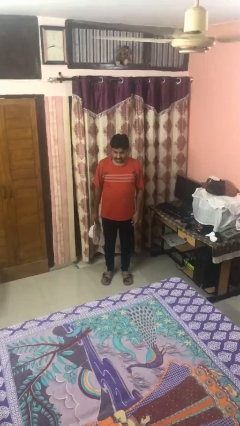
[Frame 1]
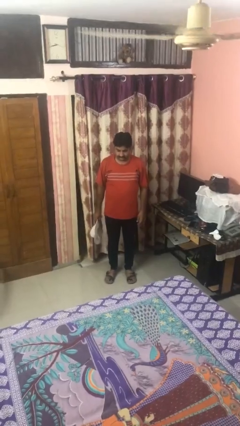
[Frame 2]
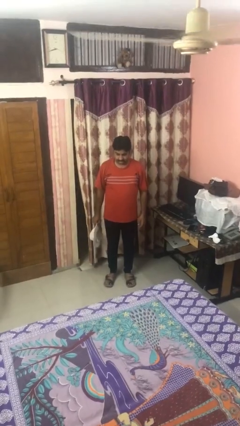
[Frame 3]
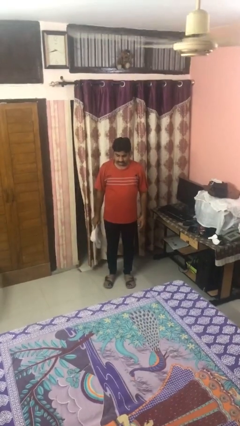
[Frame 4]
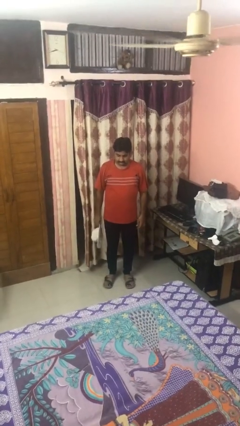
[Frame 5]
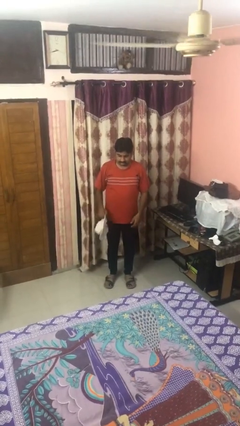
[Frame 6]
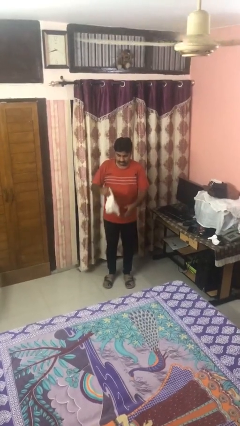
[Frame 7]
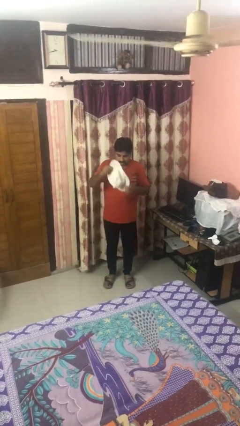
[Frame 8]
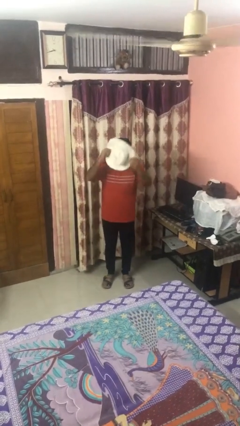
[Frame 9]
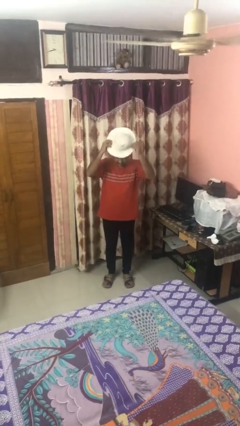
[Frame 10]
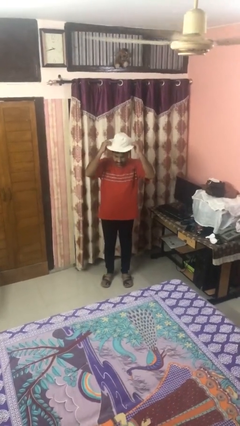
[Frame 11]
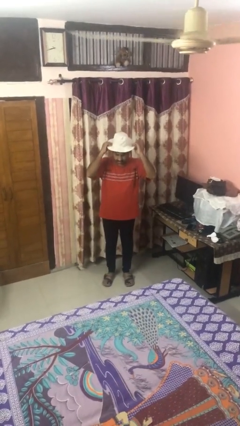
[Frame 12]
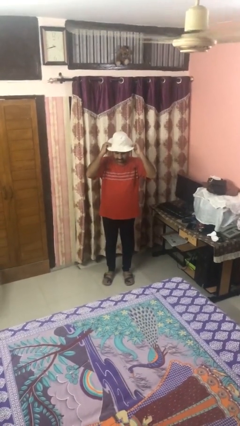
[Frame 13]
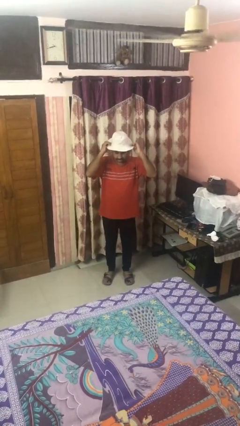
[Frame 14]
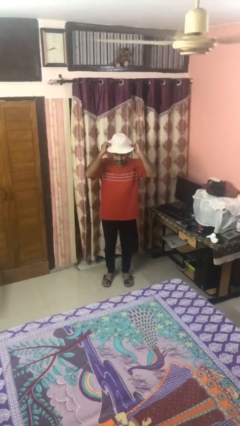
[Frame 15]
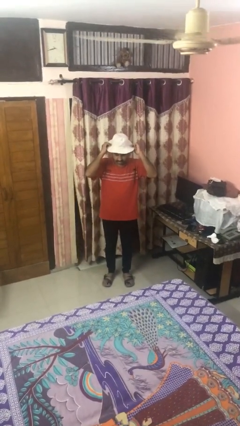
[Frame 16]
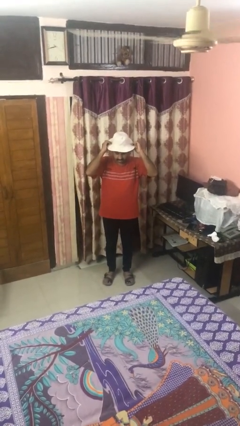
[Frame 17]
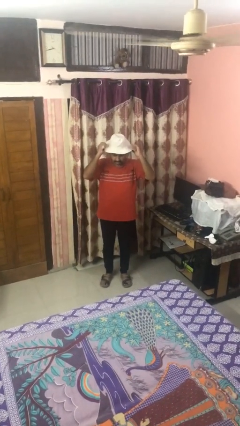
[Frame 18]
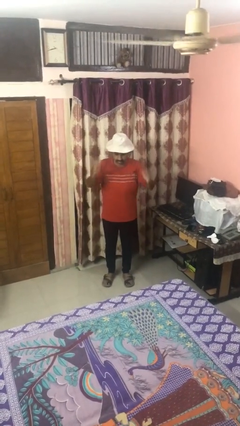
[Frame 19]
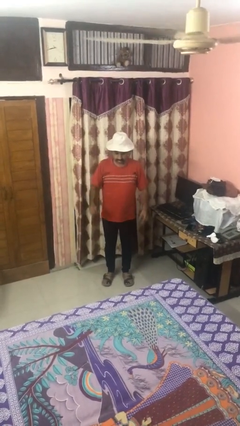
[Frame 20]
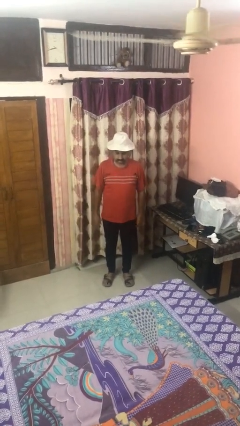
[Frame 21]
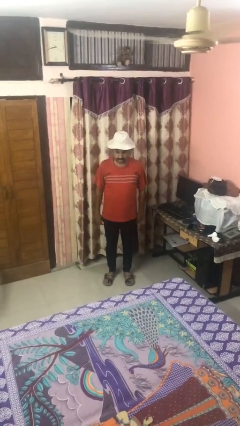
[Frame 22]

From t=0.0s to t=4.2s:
person puts on hat

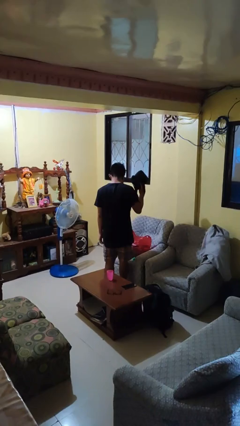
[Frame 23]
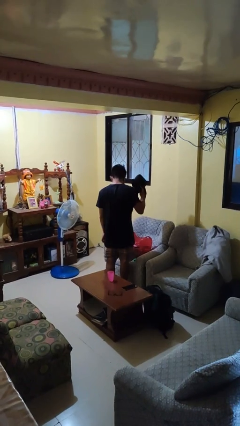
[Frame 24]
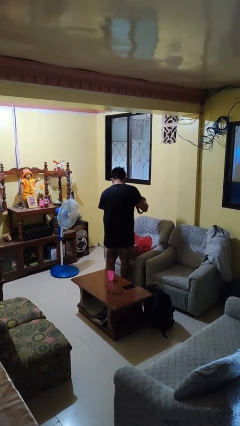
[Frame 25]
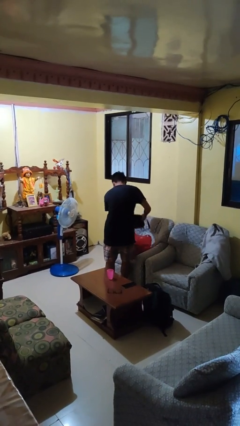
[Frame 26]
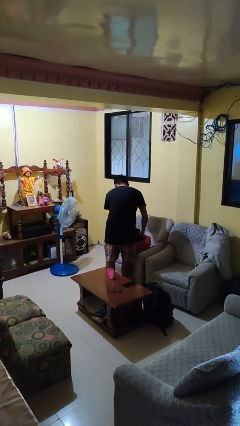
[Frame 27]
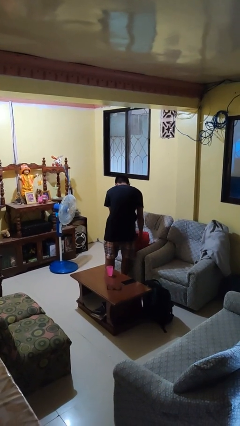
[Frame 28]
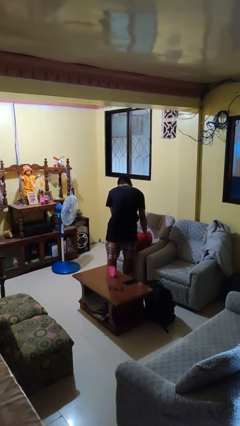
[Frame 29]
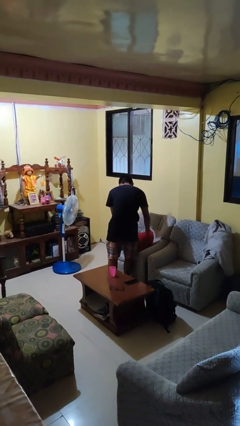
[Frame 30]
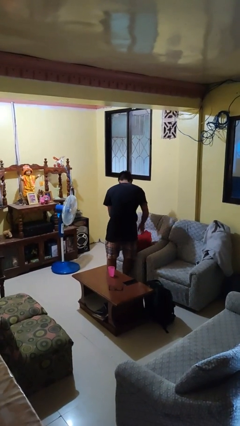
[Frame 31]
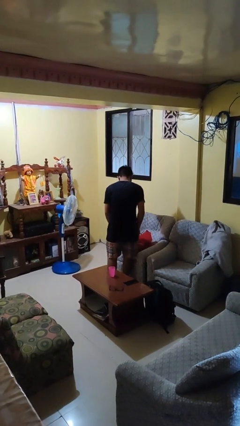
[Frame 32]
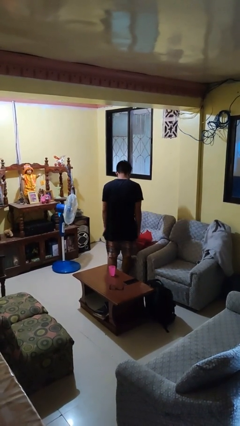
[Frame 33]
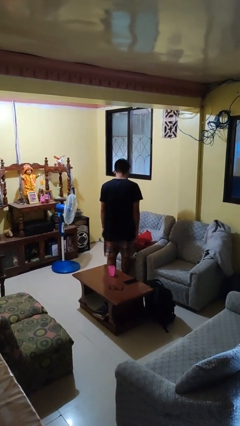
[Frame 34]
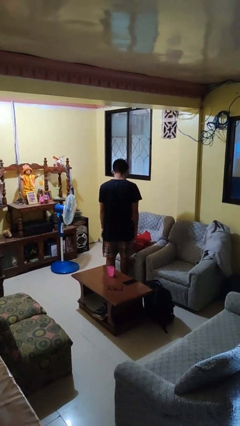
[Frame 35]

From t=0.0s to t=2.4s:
person puts object into bag

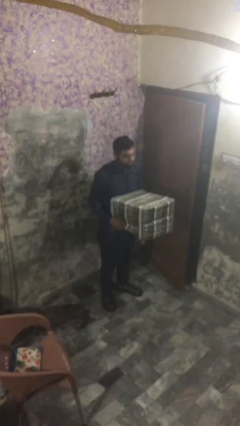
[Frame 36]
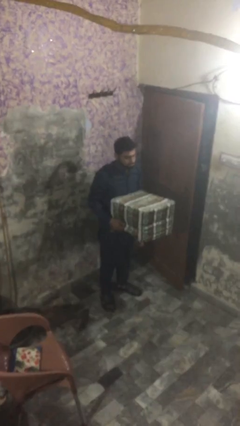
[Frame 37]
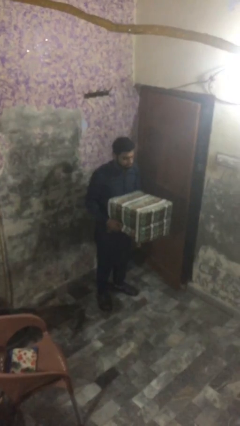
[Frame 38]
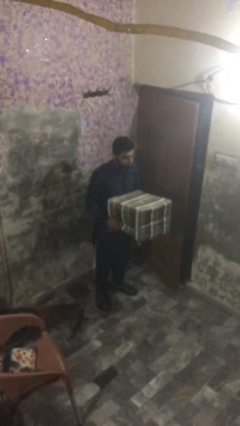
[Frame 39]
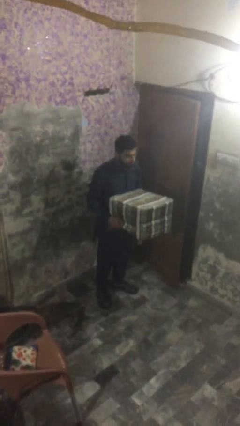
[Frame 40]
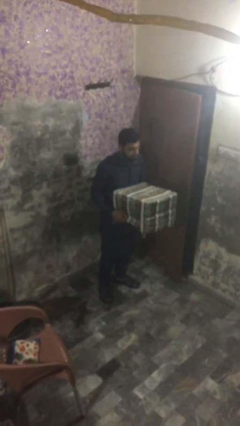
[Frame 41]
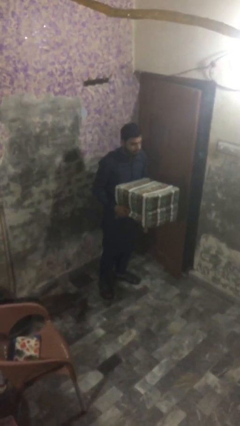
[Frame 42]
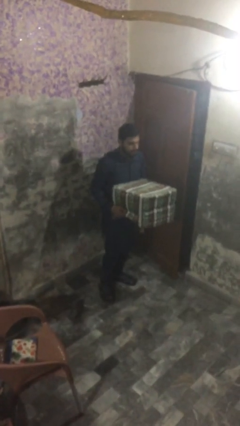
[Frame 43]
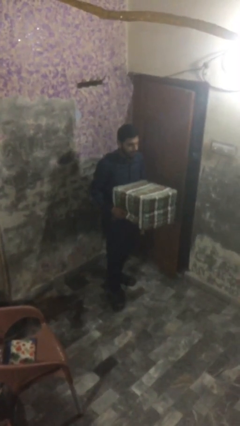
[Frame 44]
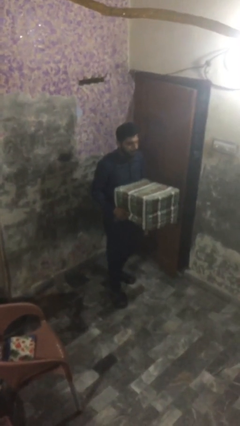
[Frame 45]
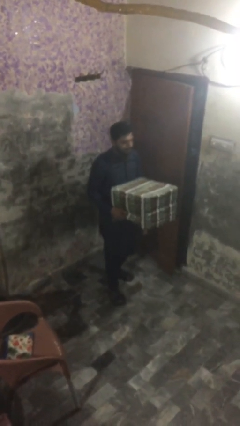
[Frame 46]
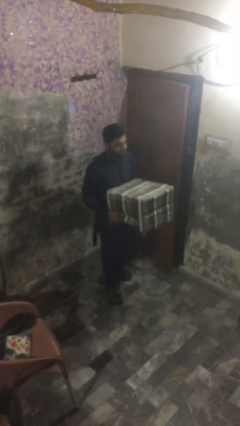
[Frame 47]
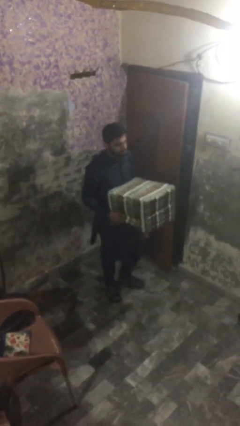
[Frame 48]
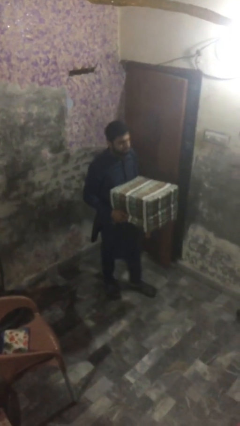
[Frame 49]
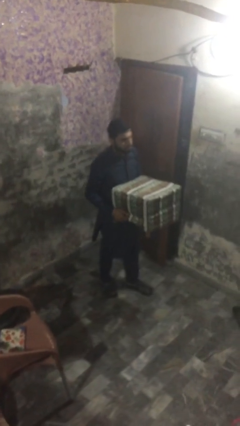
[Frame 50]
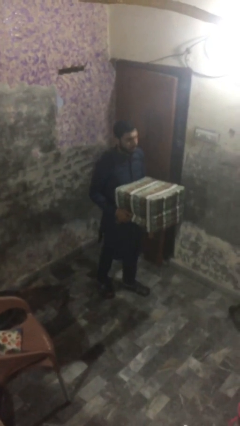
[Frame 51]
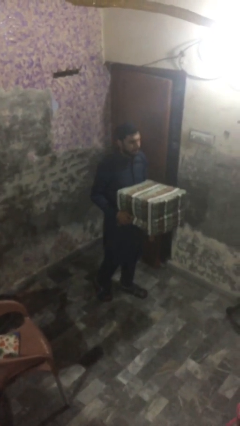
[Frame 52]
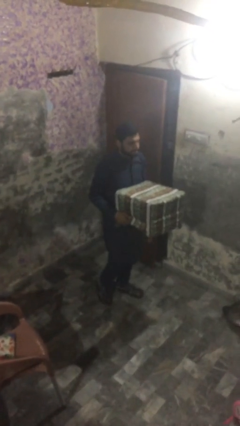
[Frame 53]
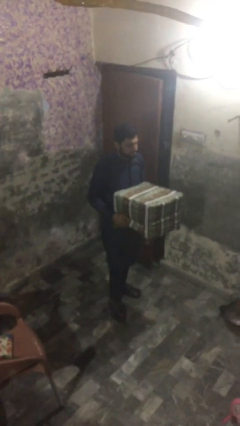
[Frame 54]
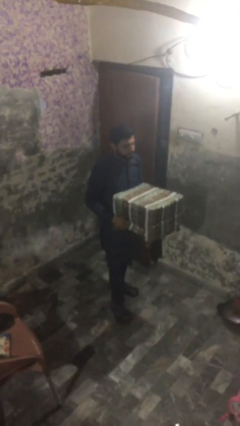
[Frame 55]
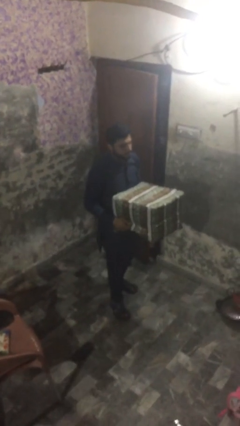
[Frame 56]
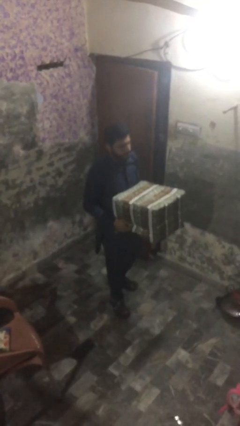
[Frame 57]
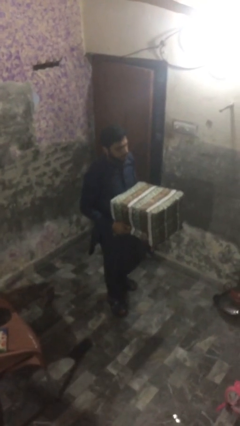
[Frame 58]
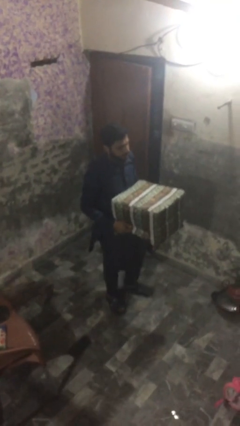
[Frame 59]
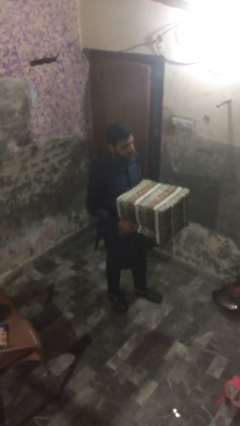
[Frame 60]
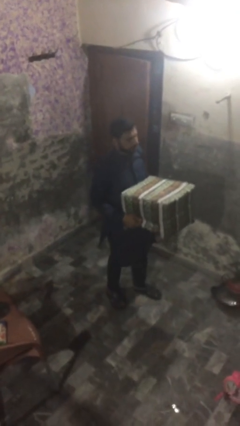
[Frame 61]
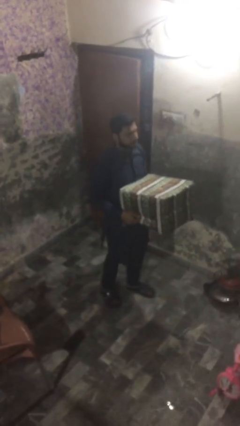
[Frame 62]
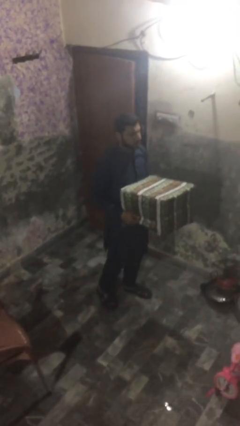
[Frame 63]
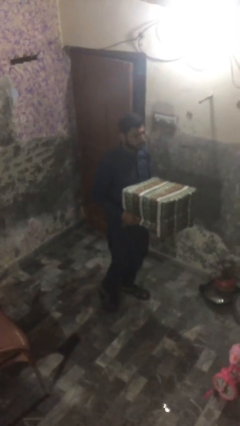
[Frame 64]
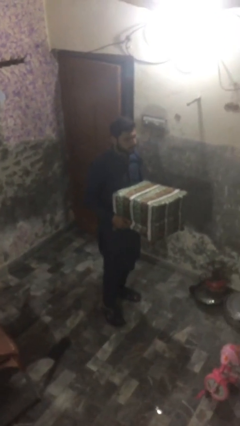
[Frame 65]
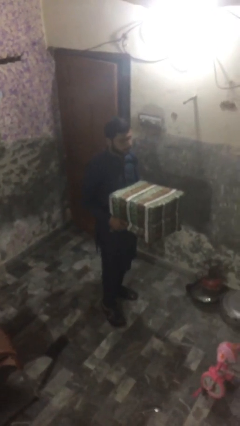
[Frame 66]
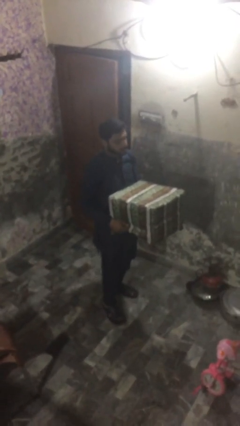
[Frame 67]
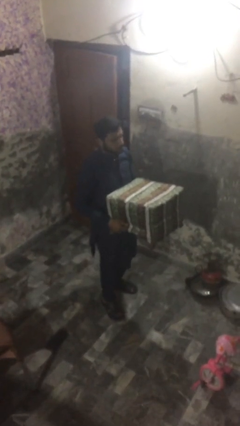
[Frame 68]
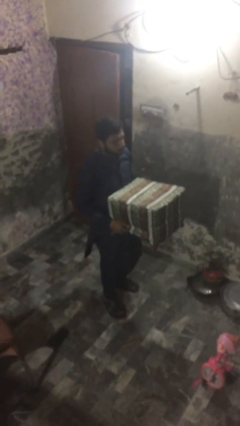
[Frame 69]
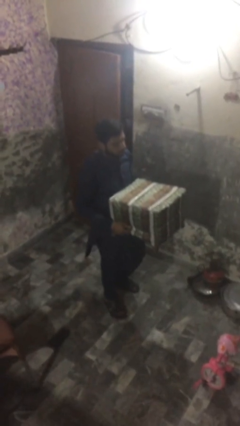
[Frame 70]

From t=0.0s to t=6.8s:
person carries heavy object

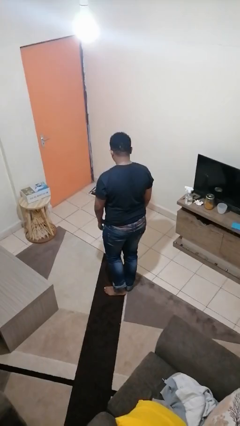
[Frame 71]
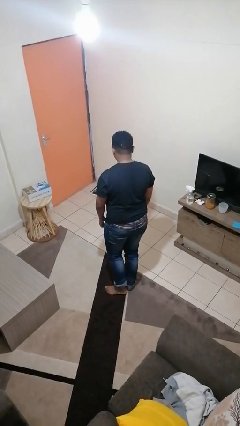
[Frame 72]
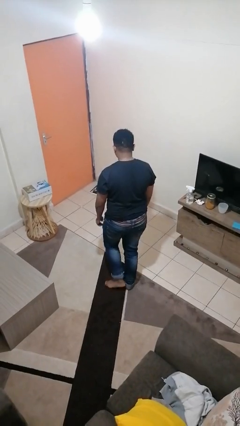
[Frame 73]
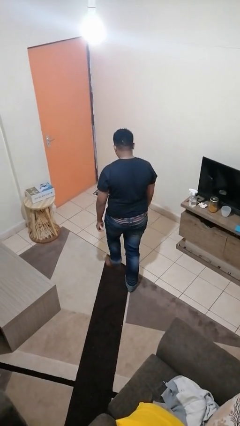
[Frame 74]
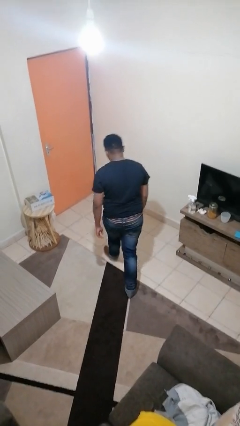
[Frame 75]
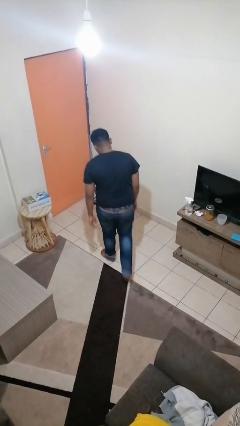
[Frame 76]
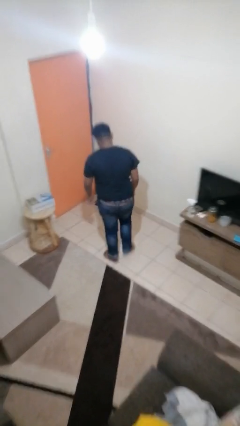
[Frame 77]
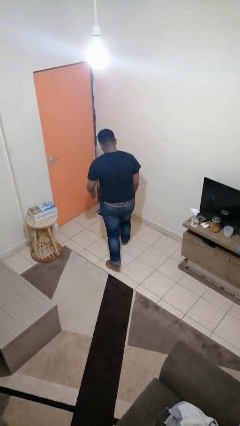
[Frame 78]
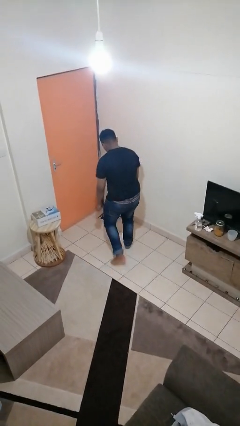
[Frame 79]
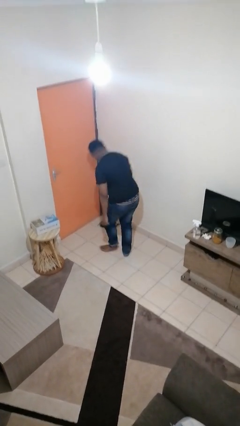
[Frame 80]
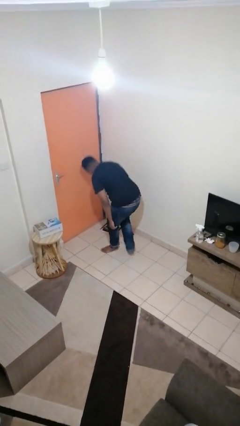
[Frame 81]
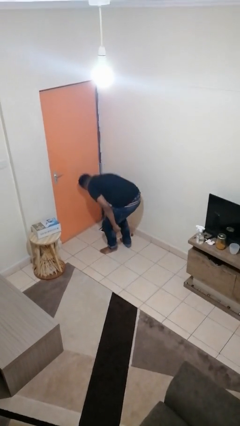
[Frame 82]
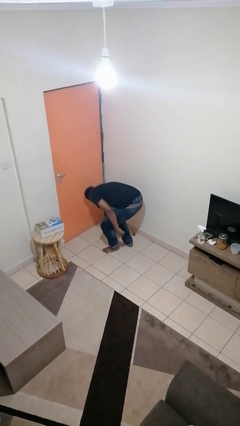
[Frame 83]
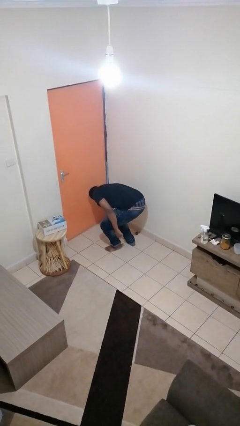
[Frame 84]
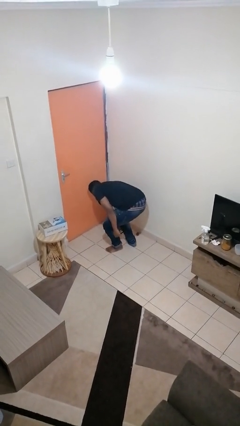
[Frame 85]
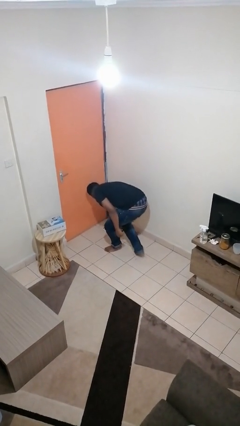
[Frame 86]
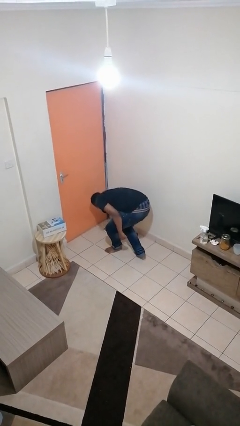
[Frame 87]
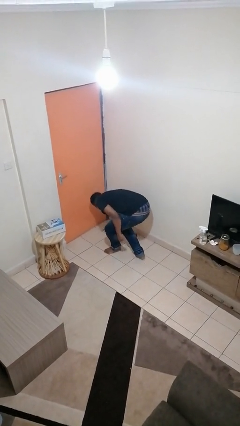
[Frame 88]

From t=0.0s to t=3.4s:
person picks up object from floor

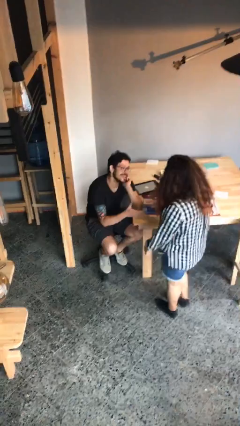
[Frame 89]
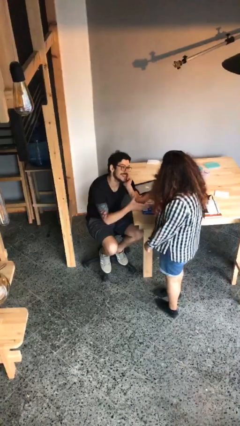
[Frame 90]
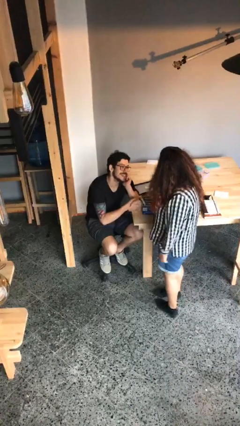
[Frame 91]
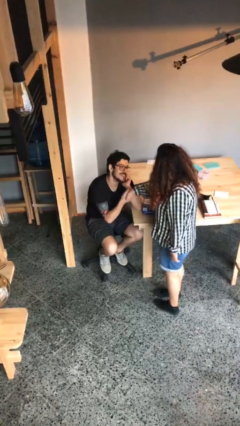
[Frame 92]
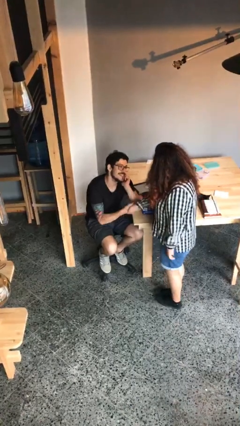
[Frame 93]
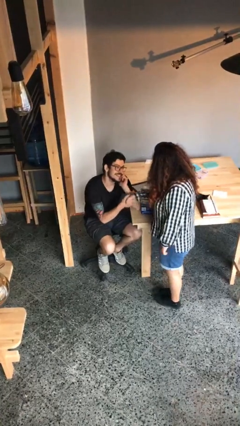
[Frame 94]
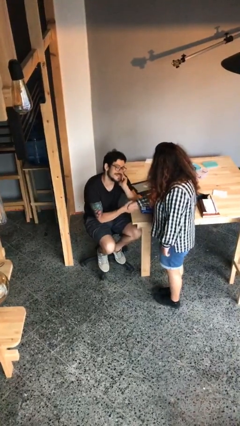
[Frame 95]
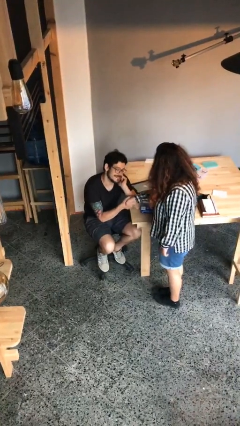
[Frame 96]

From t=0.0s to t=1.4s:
person shakes hand
